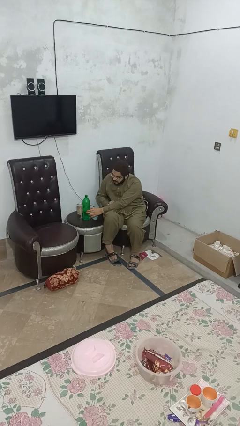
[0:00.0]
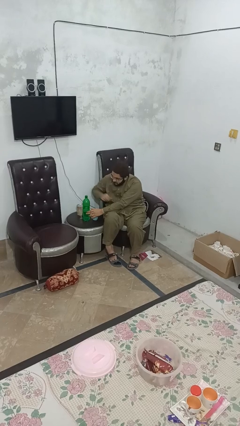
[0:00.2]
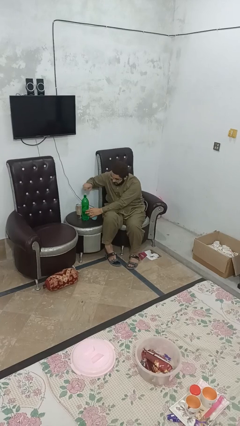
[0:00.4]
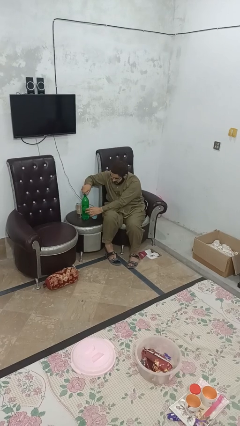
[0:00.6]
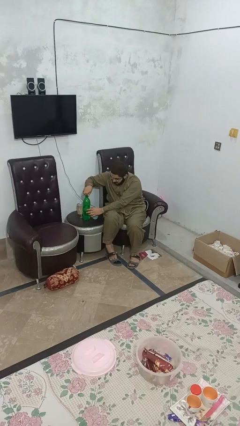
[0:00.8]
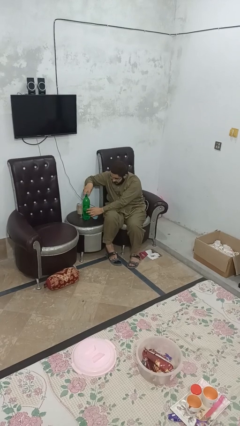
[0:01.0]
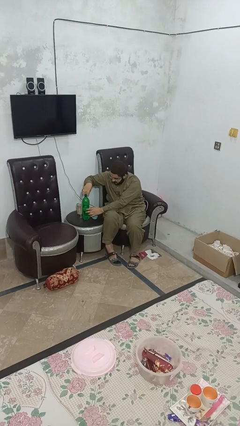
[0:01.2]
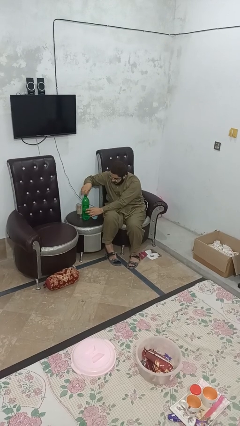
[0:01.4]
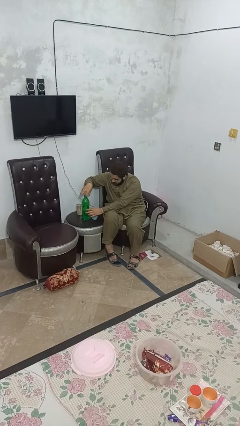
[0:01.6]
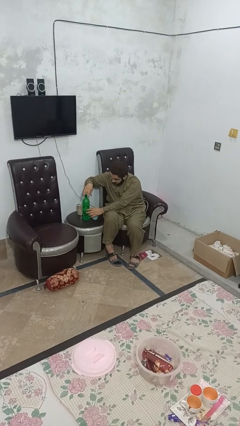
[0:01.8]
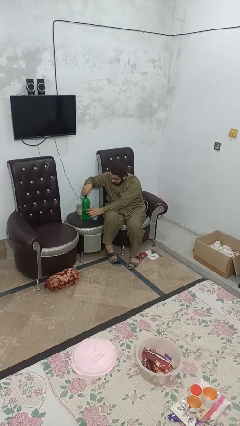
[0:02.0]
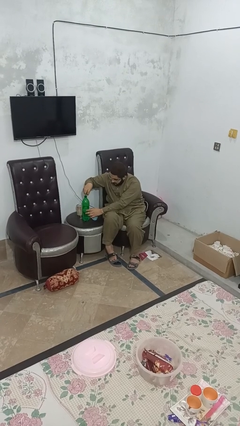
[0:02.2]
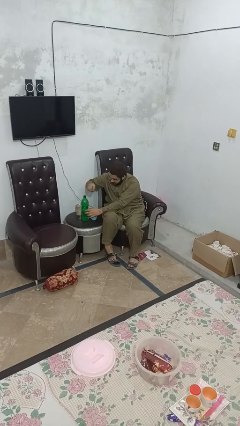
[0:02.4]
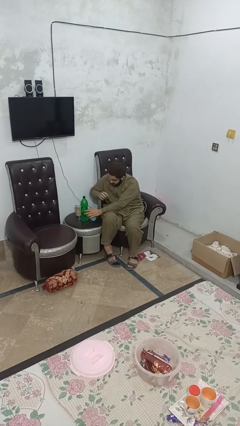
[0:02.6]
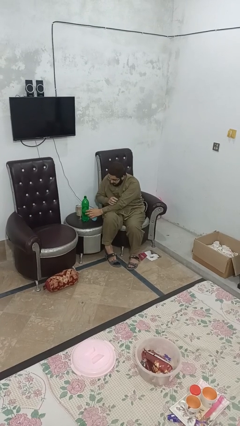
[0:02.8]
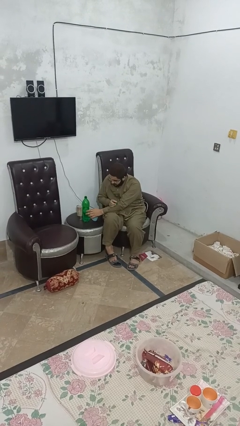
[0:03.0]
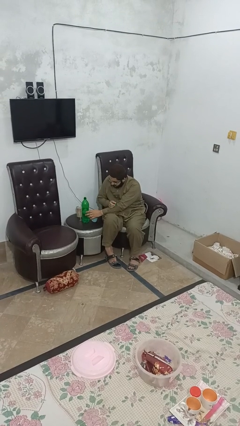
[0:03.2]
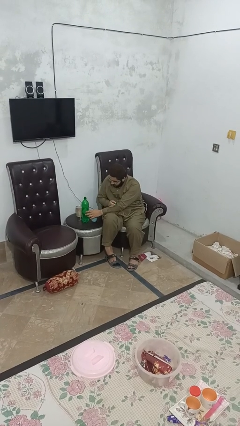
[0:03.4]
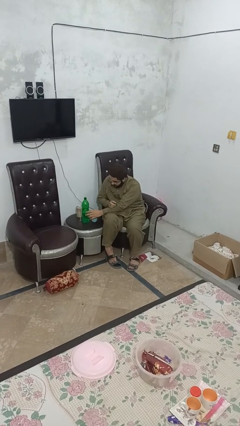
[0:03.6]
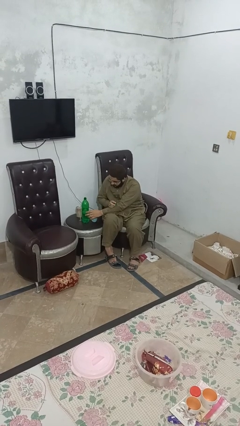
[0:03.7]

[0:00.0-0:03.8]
person unscrews lid from bottle

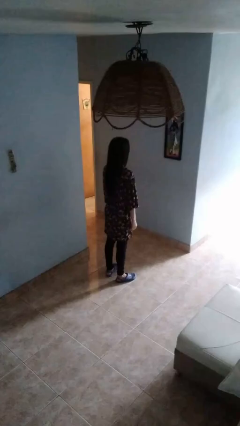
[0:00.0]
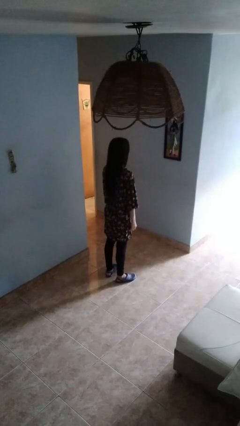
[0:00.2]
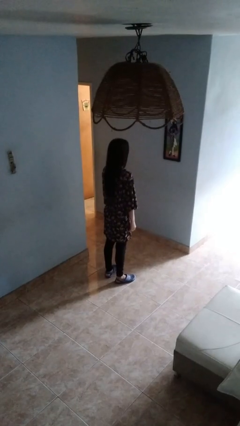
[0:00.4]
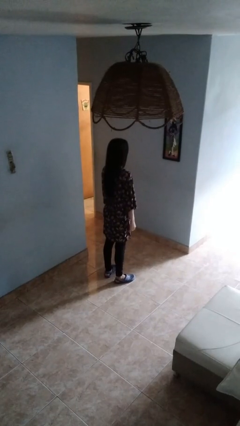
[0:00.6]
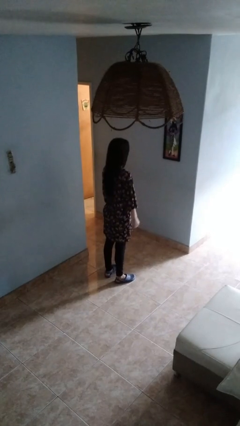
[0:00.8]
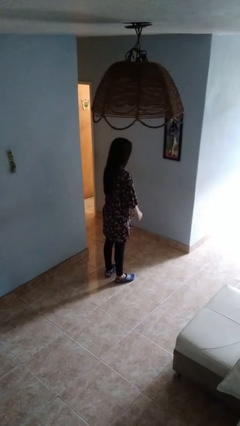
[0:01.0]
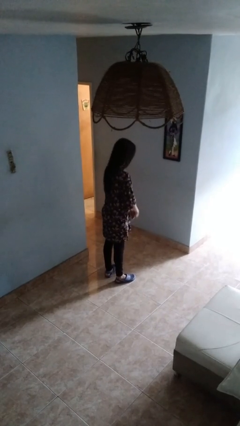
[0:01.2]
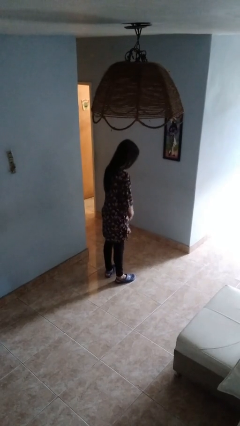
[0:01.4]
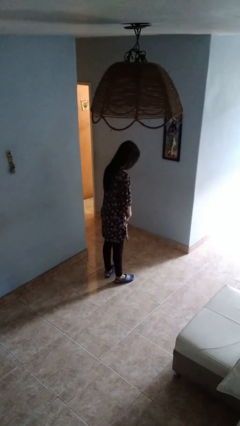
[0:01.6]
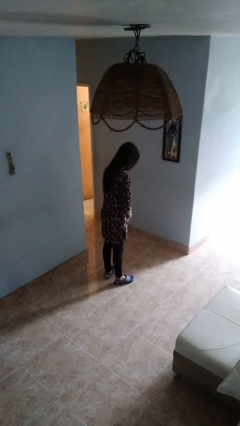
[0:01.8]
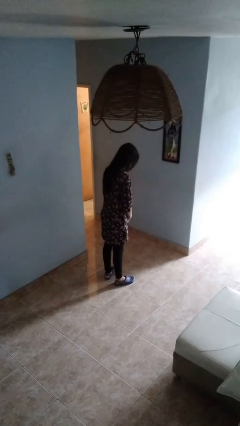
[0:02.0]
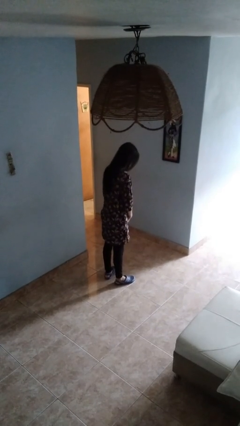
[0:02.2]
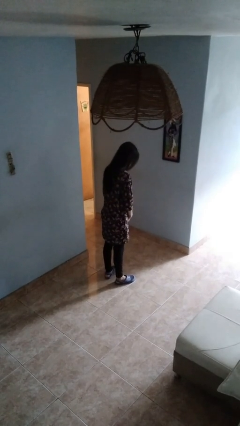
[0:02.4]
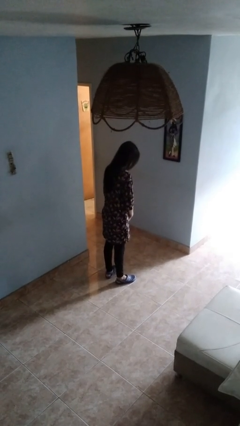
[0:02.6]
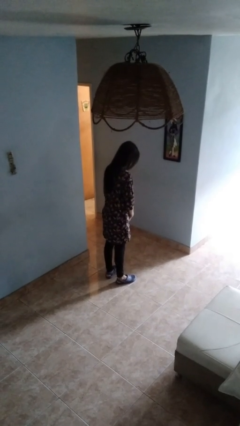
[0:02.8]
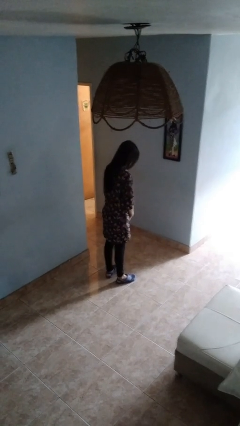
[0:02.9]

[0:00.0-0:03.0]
person prays

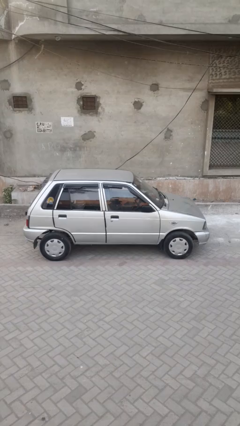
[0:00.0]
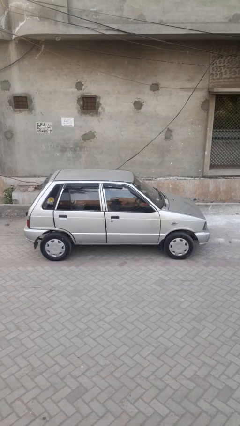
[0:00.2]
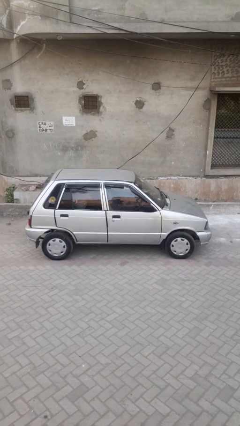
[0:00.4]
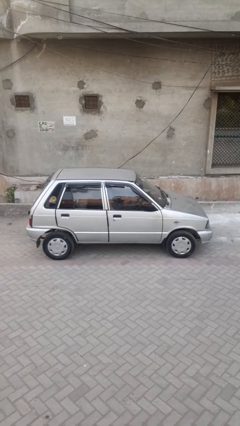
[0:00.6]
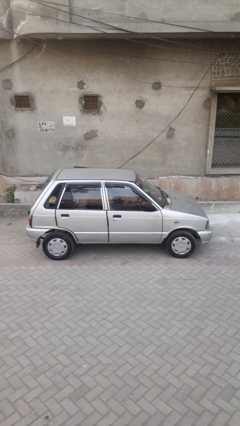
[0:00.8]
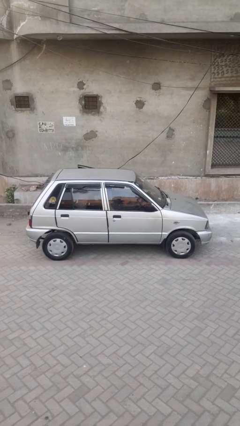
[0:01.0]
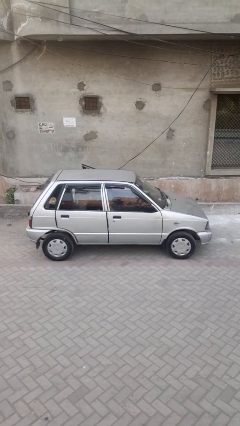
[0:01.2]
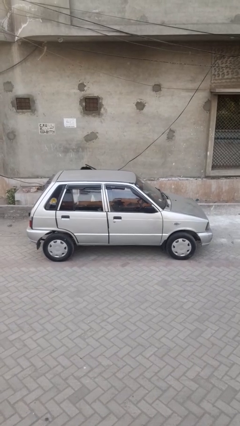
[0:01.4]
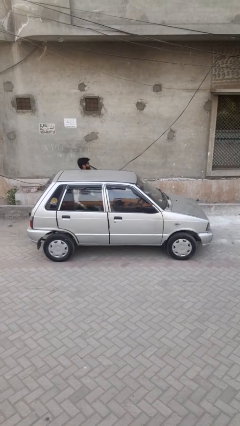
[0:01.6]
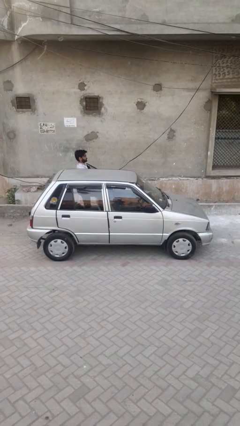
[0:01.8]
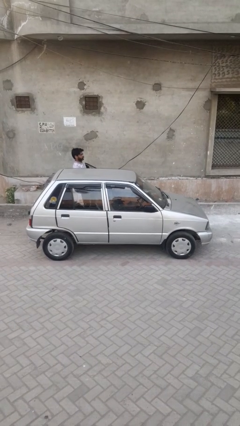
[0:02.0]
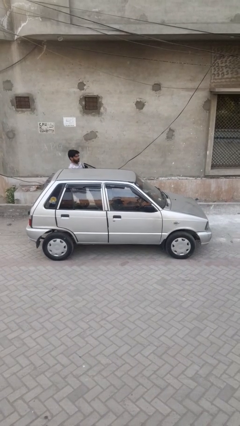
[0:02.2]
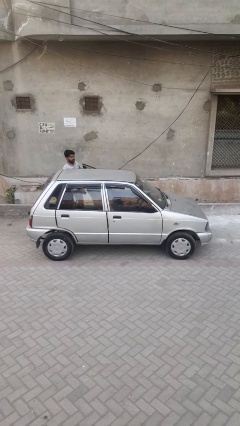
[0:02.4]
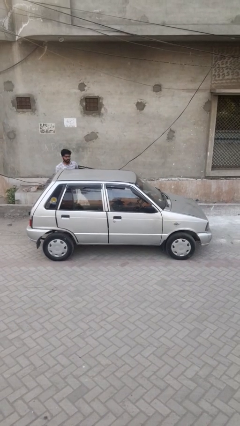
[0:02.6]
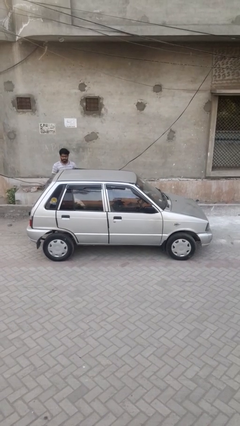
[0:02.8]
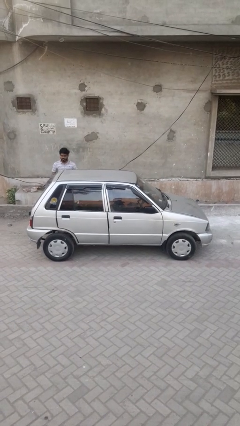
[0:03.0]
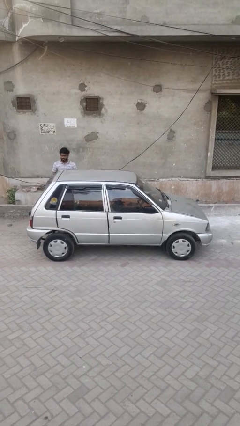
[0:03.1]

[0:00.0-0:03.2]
car drops off person

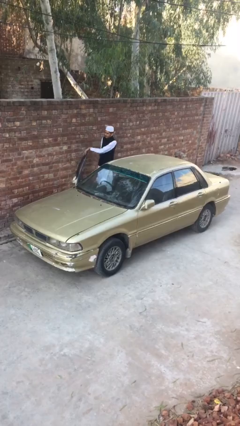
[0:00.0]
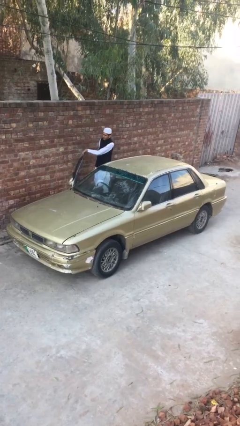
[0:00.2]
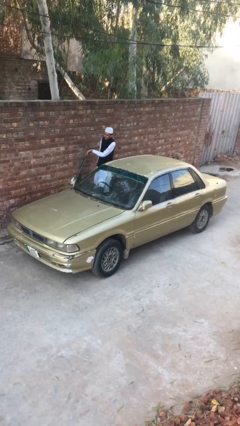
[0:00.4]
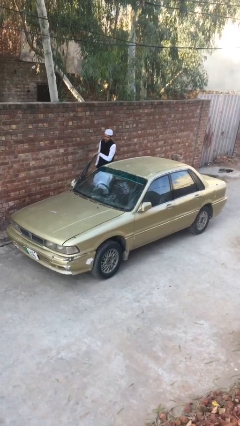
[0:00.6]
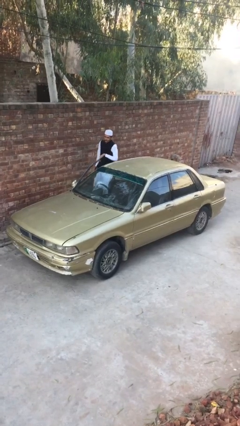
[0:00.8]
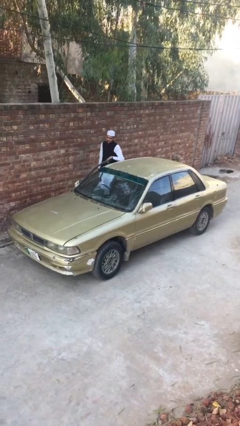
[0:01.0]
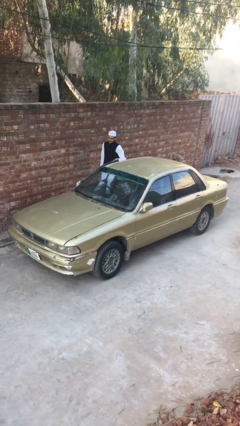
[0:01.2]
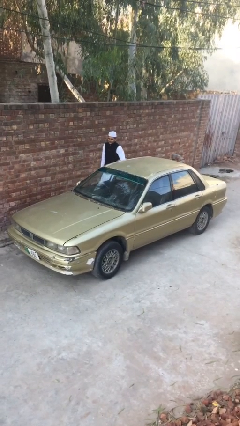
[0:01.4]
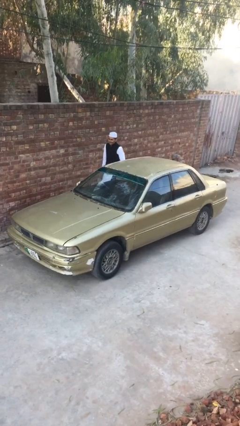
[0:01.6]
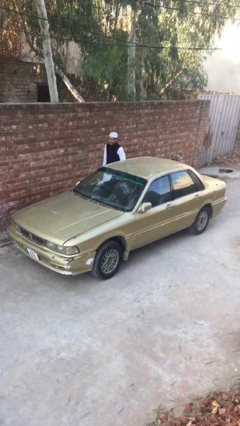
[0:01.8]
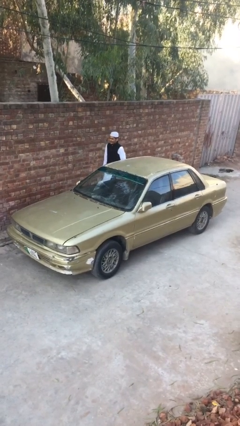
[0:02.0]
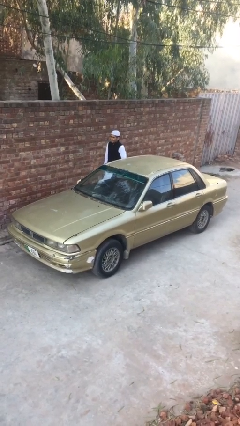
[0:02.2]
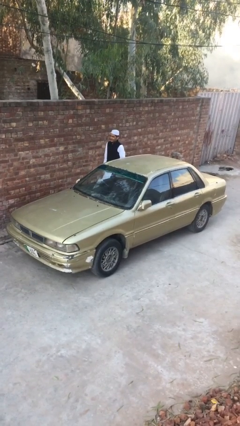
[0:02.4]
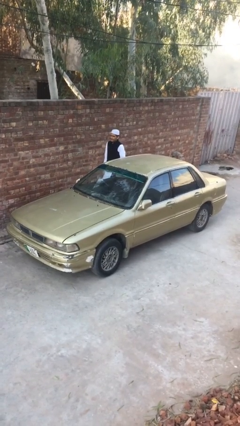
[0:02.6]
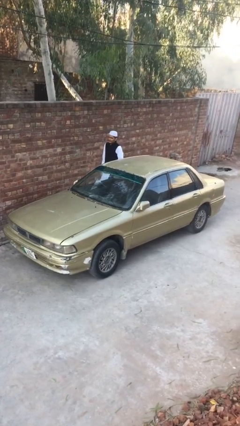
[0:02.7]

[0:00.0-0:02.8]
person closes car door

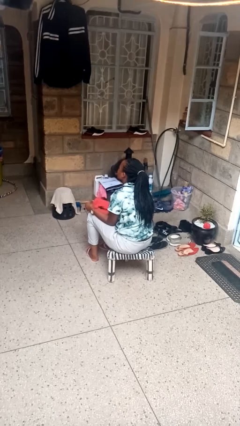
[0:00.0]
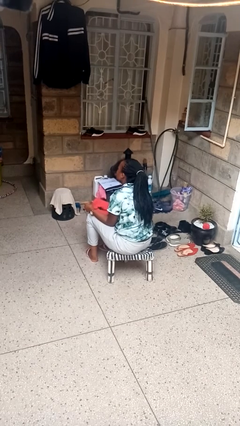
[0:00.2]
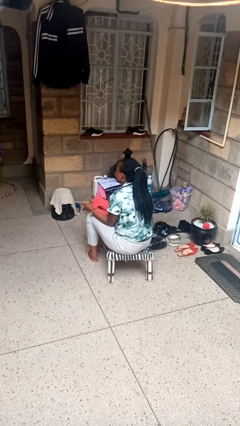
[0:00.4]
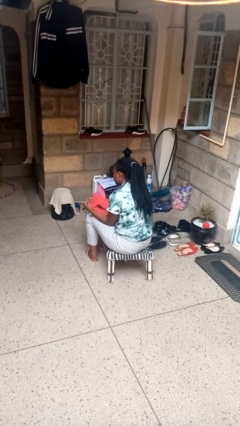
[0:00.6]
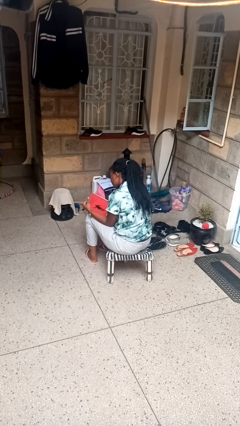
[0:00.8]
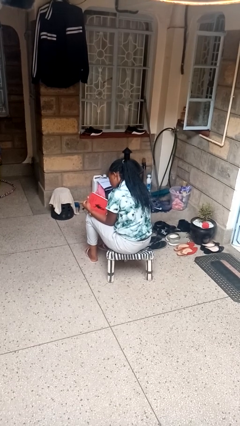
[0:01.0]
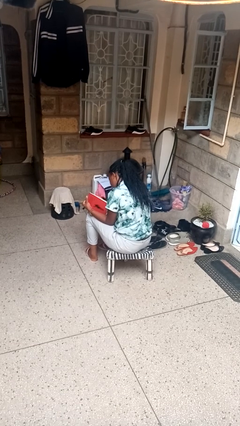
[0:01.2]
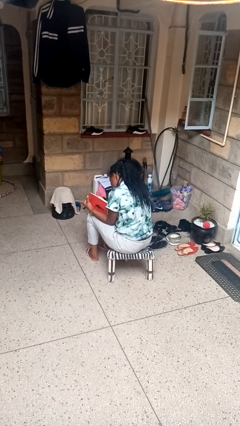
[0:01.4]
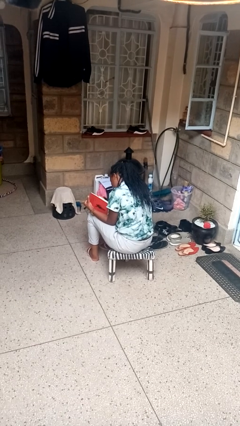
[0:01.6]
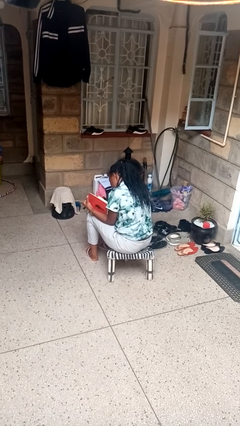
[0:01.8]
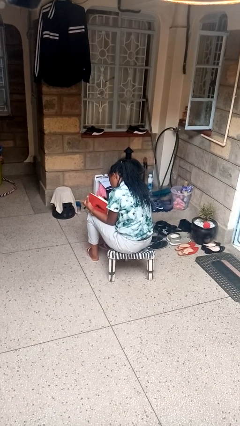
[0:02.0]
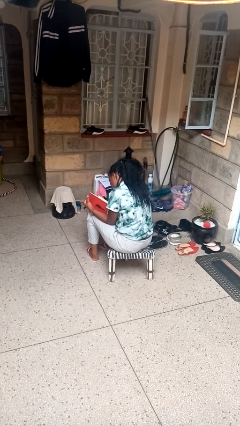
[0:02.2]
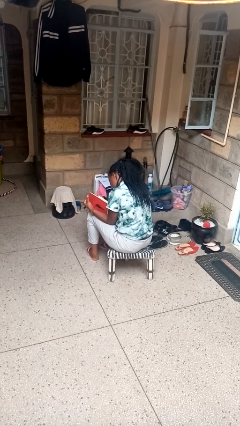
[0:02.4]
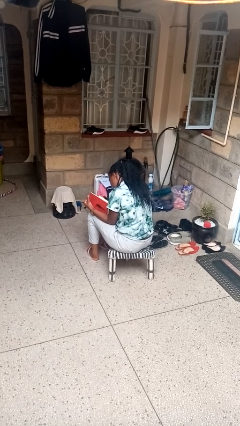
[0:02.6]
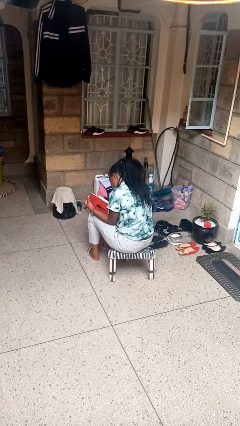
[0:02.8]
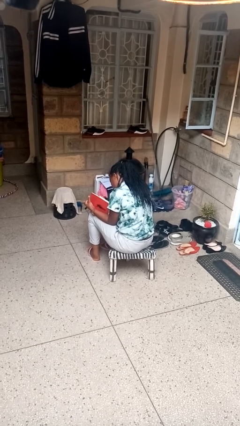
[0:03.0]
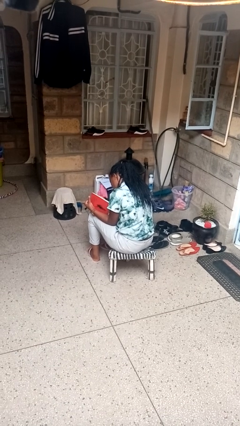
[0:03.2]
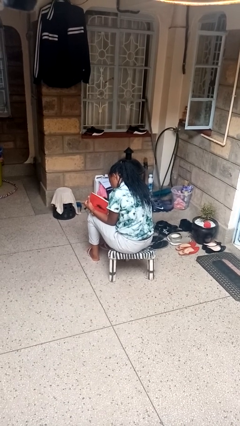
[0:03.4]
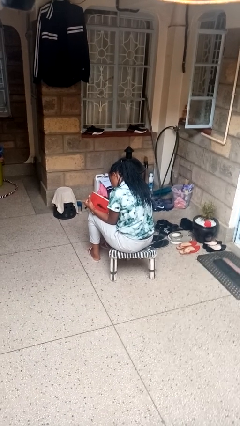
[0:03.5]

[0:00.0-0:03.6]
person reads book

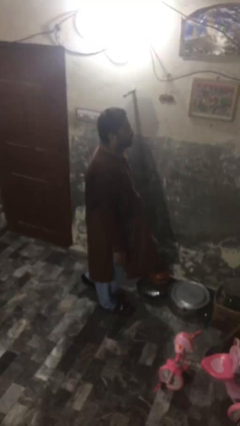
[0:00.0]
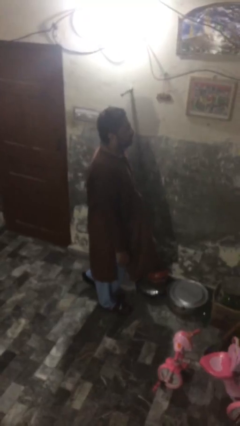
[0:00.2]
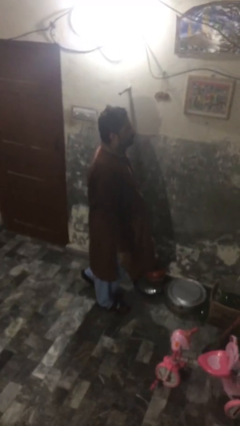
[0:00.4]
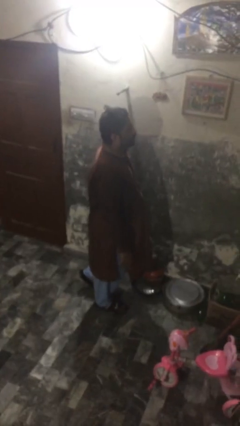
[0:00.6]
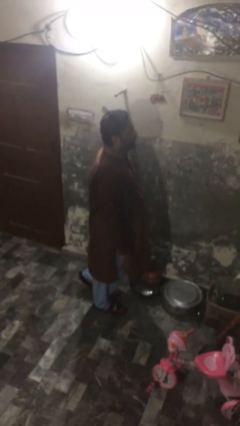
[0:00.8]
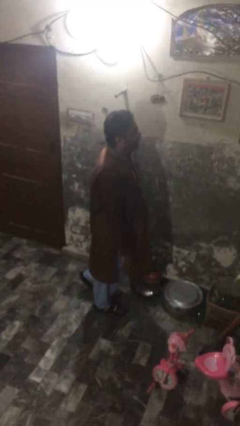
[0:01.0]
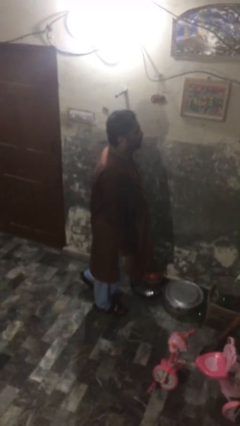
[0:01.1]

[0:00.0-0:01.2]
person puts down object on floor
